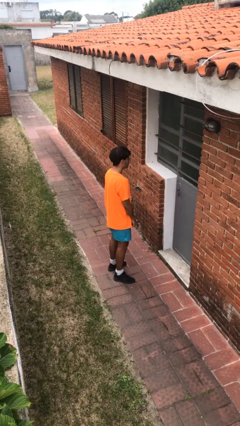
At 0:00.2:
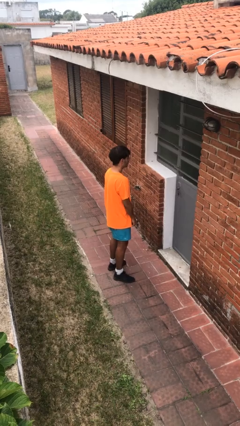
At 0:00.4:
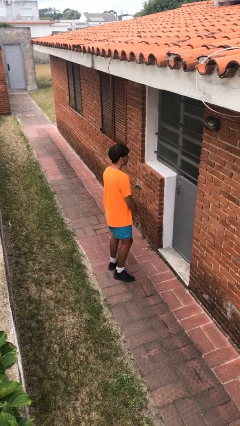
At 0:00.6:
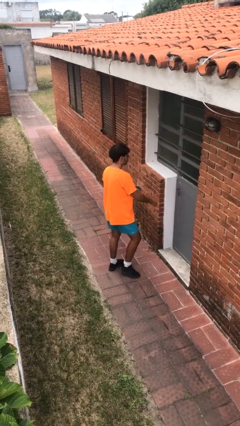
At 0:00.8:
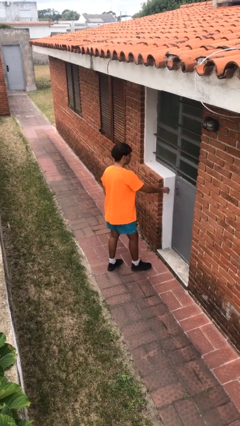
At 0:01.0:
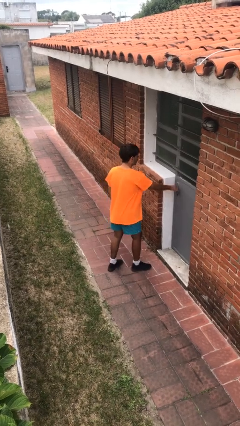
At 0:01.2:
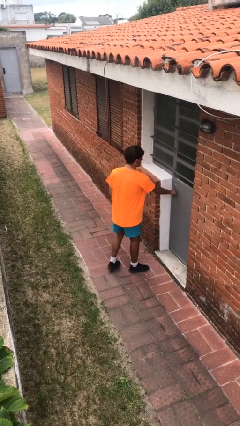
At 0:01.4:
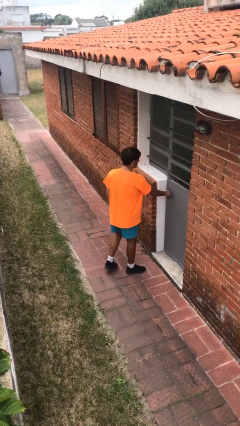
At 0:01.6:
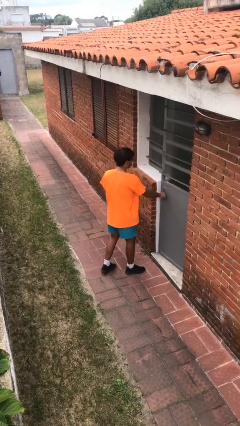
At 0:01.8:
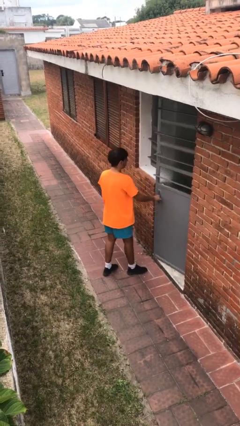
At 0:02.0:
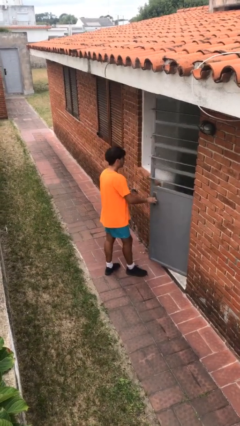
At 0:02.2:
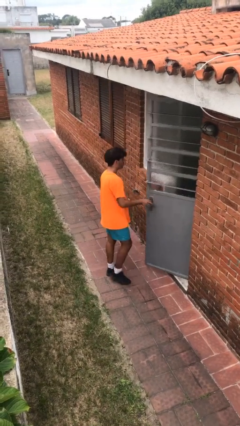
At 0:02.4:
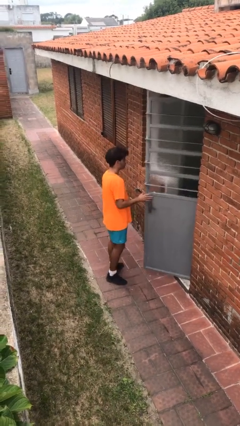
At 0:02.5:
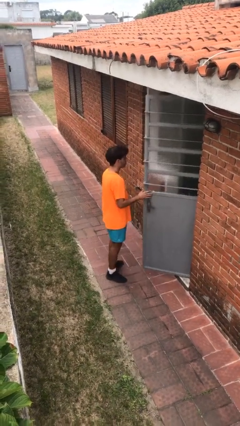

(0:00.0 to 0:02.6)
person opens facility door

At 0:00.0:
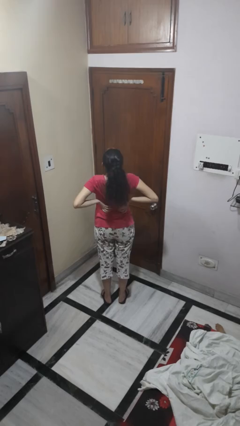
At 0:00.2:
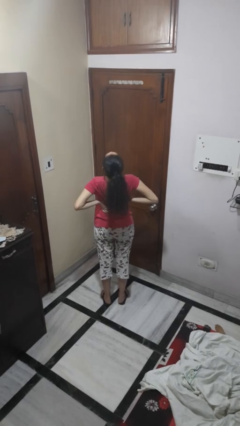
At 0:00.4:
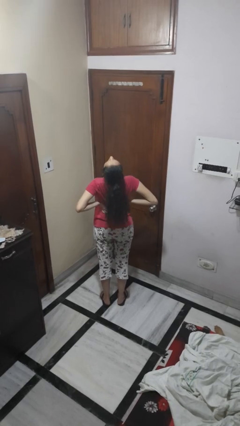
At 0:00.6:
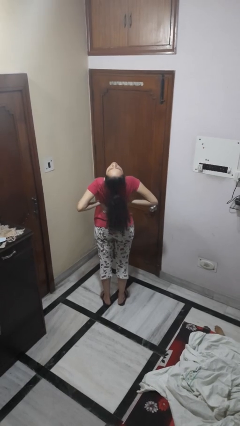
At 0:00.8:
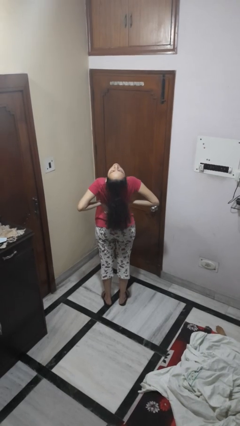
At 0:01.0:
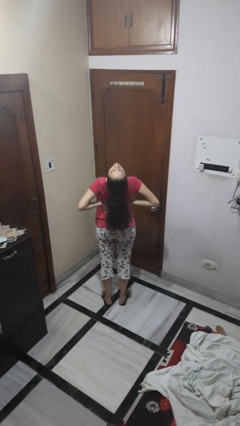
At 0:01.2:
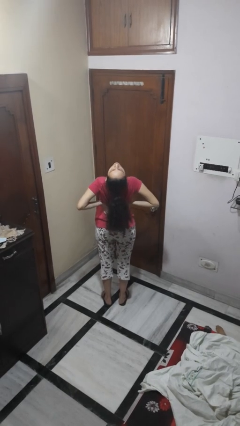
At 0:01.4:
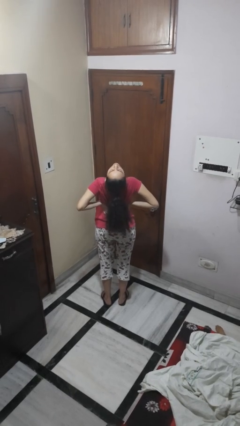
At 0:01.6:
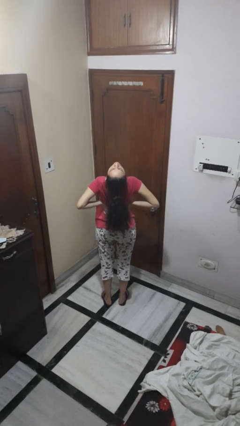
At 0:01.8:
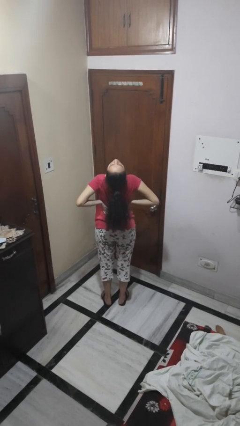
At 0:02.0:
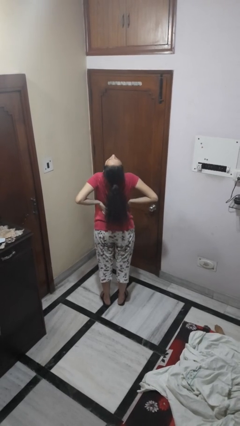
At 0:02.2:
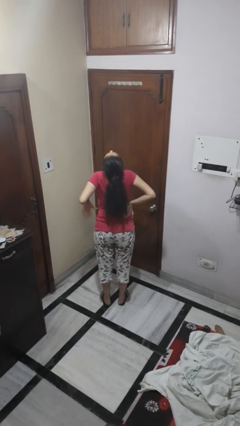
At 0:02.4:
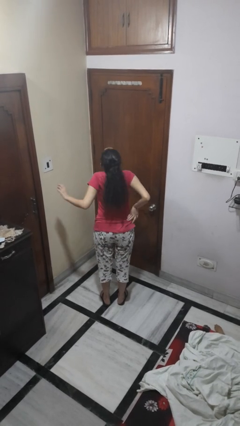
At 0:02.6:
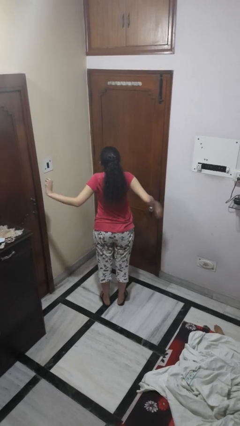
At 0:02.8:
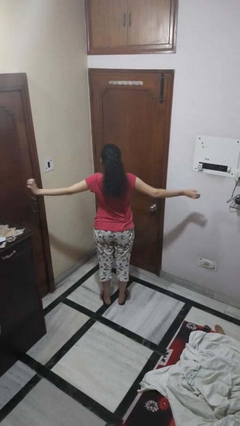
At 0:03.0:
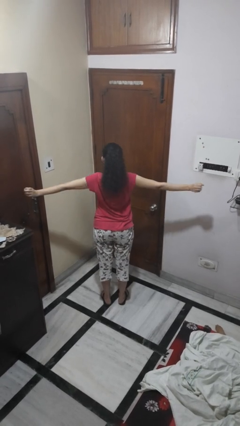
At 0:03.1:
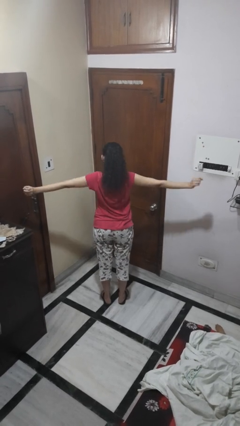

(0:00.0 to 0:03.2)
person stretches back

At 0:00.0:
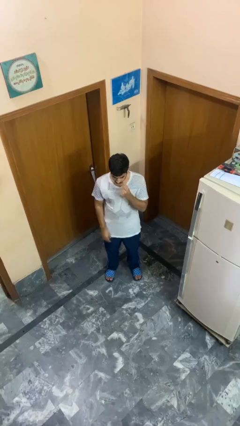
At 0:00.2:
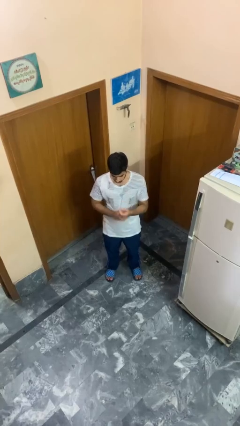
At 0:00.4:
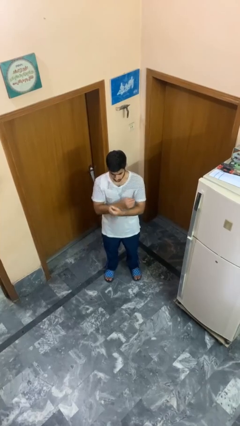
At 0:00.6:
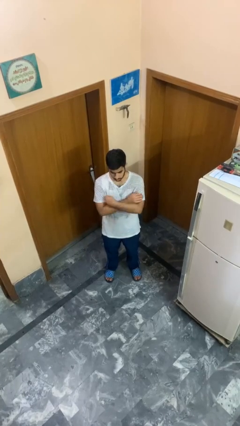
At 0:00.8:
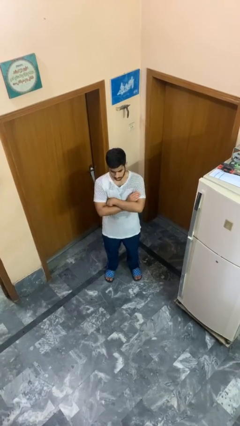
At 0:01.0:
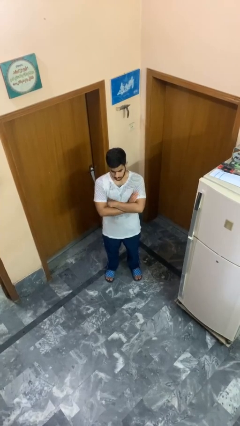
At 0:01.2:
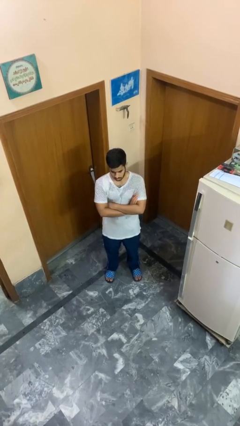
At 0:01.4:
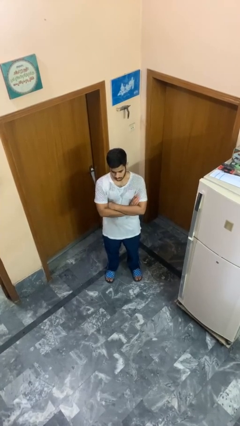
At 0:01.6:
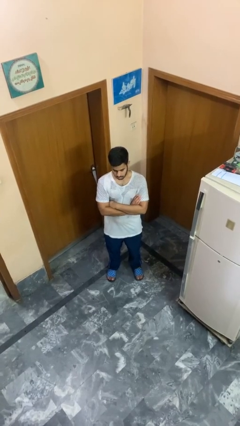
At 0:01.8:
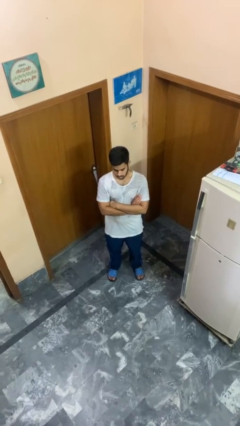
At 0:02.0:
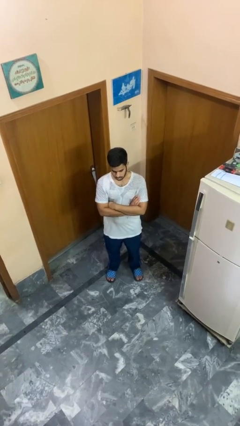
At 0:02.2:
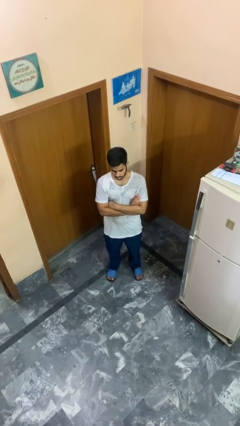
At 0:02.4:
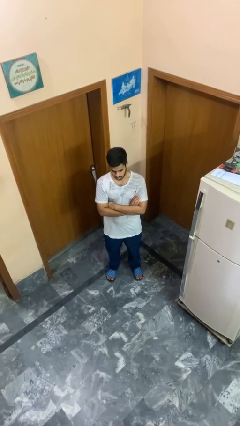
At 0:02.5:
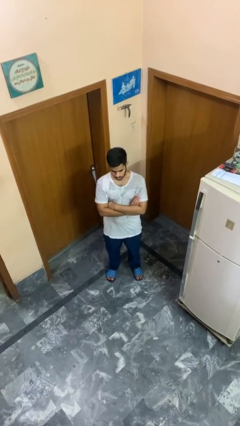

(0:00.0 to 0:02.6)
person crosses arms

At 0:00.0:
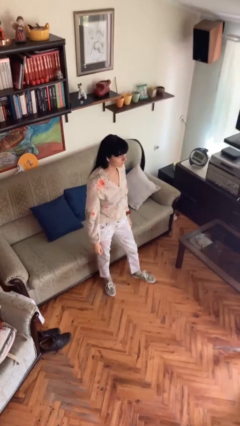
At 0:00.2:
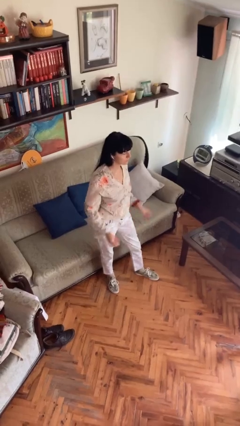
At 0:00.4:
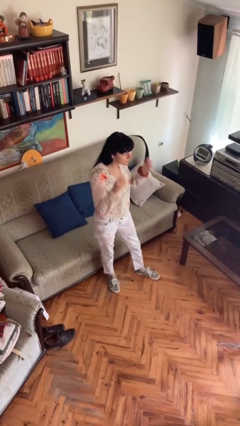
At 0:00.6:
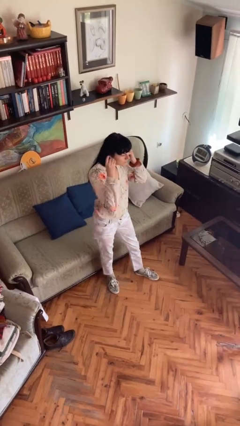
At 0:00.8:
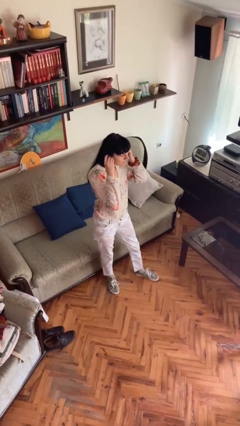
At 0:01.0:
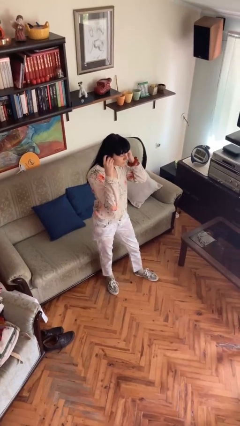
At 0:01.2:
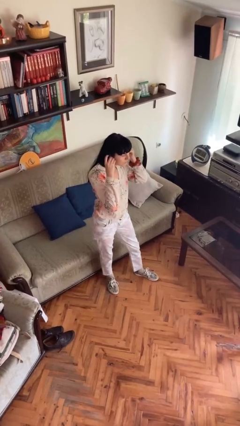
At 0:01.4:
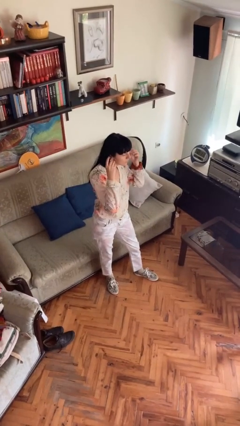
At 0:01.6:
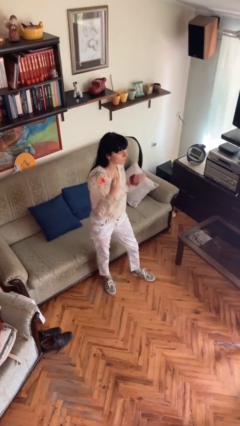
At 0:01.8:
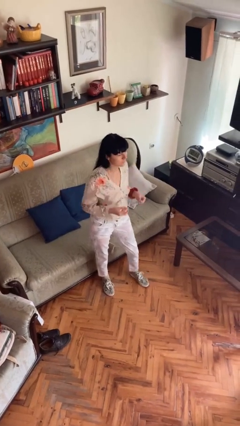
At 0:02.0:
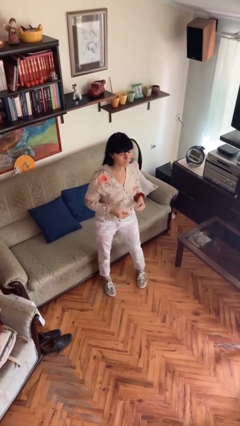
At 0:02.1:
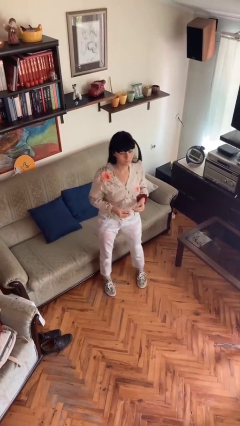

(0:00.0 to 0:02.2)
person takes off headphones

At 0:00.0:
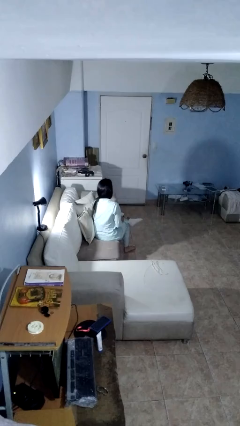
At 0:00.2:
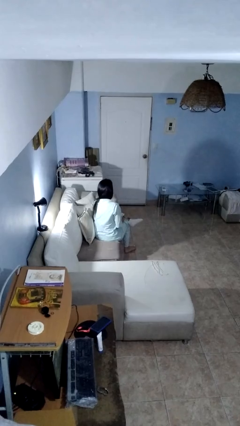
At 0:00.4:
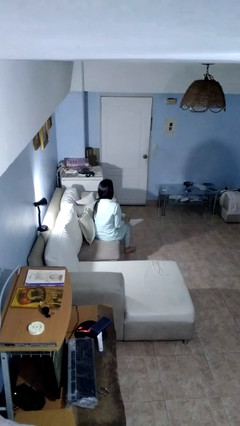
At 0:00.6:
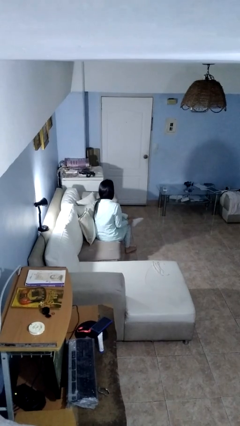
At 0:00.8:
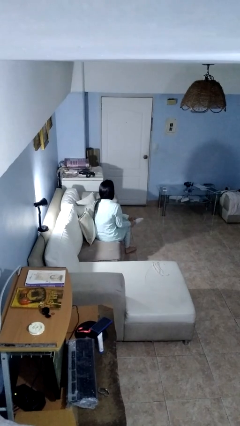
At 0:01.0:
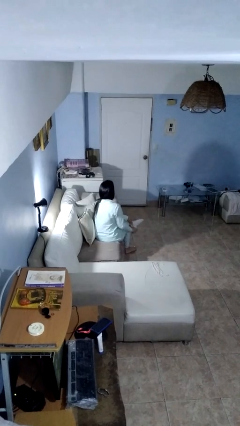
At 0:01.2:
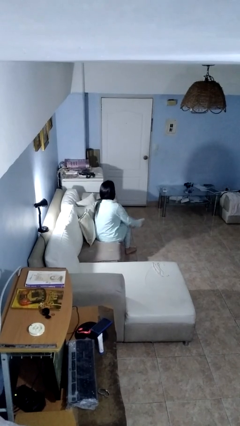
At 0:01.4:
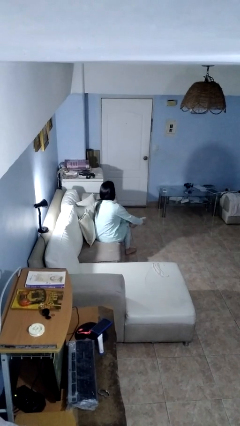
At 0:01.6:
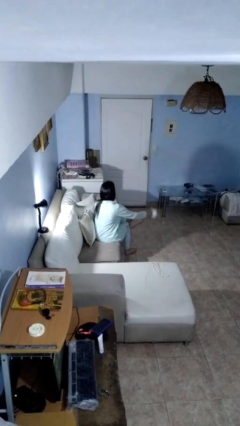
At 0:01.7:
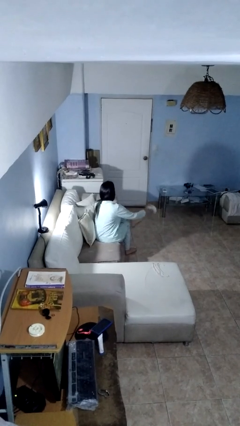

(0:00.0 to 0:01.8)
person takes off socks

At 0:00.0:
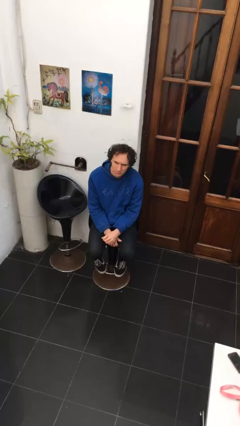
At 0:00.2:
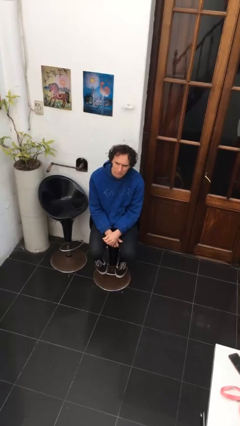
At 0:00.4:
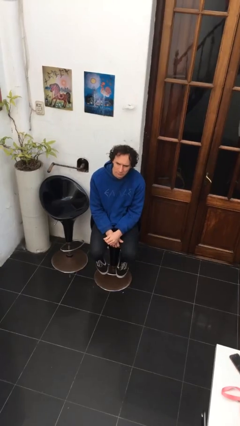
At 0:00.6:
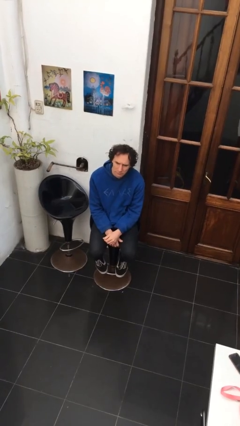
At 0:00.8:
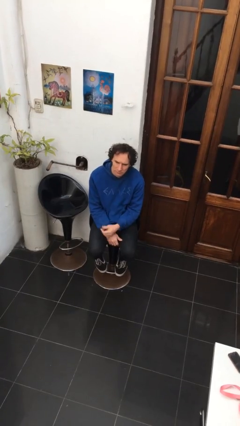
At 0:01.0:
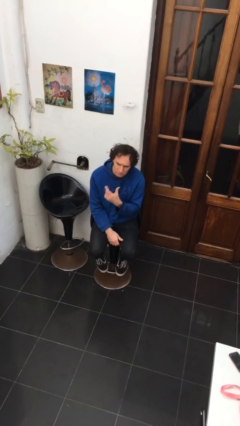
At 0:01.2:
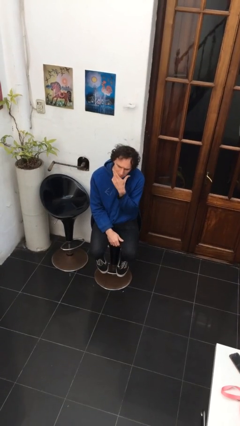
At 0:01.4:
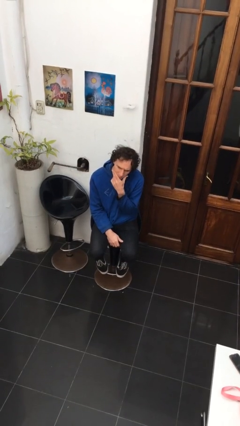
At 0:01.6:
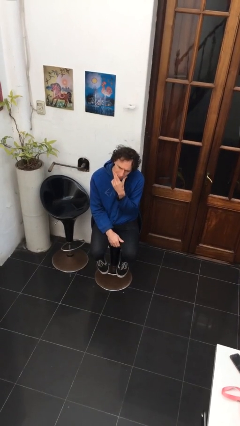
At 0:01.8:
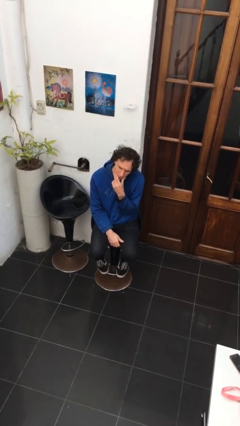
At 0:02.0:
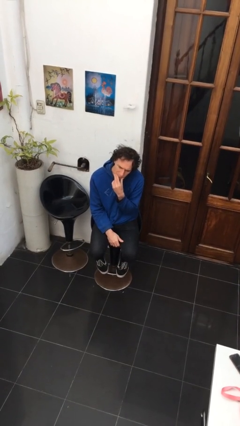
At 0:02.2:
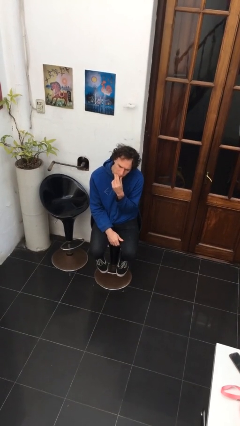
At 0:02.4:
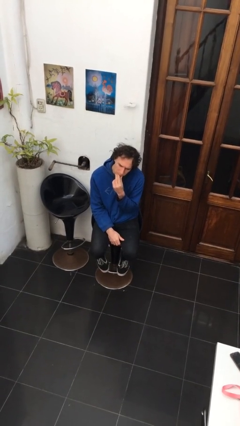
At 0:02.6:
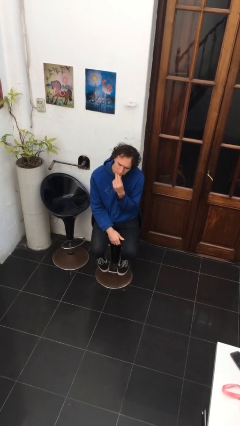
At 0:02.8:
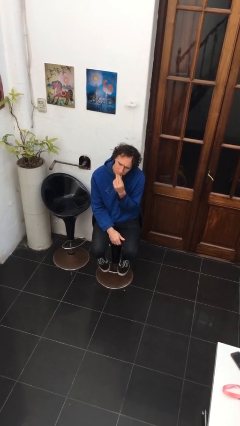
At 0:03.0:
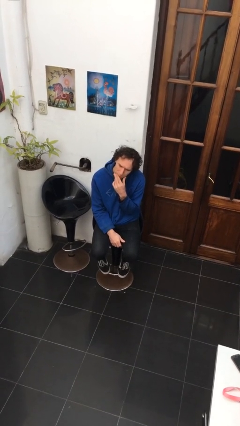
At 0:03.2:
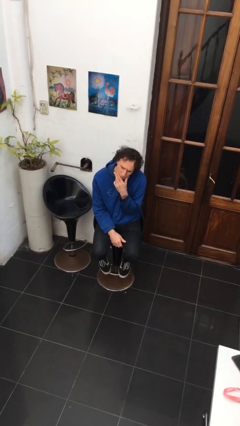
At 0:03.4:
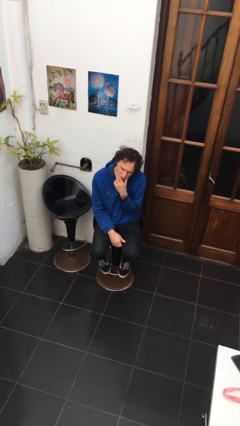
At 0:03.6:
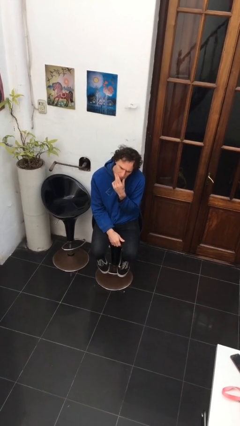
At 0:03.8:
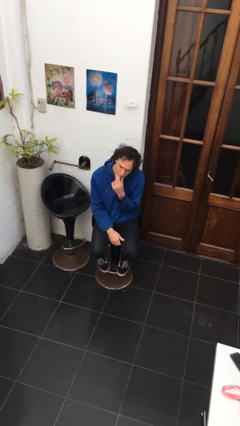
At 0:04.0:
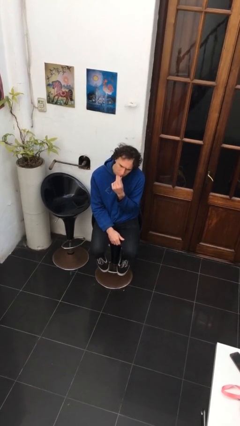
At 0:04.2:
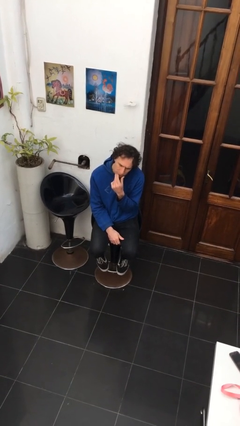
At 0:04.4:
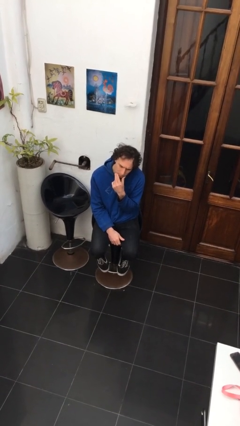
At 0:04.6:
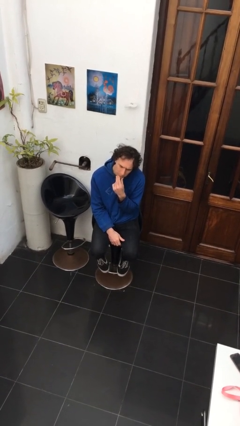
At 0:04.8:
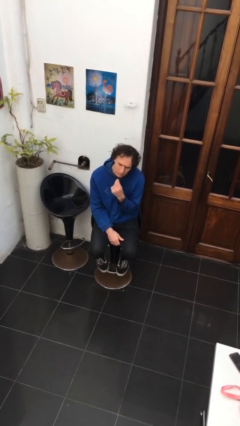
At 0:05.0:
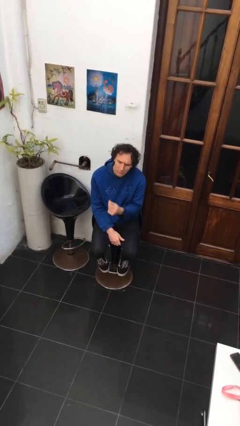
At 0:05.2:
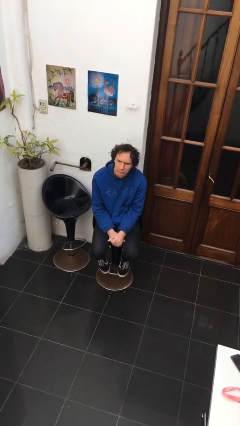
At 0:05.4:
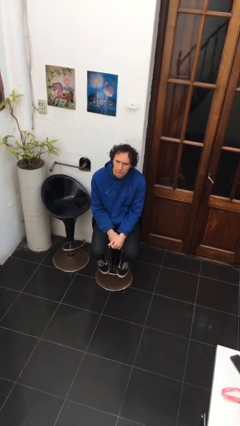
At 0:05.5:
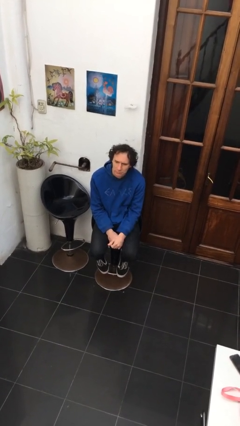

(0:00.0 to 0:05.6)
person strokes chin
